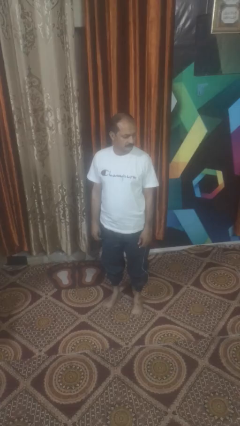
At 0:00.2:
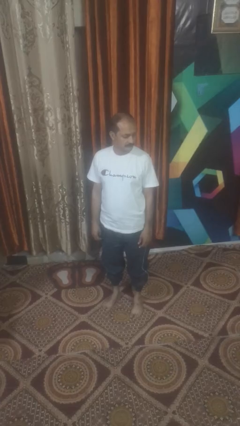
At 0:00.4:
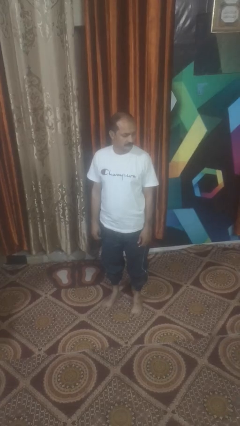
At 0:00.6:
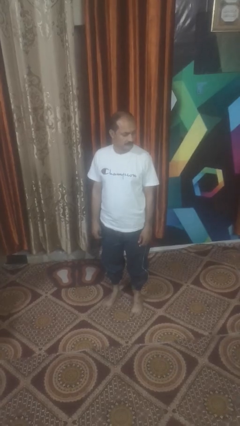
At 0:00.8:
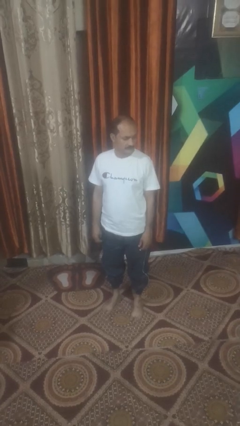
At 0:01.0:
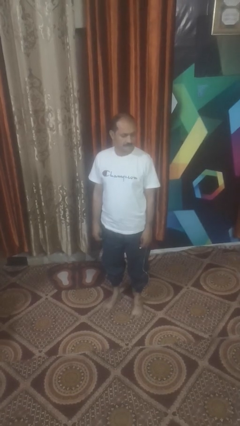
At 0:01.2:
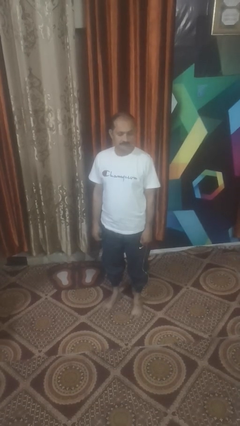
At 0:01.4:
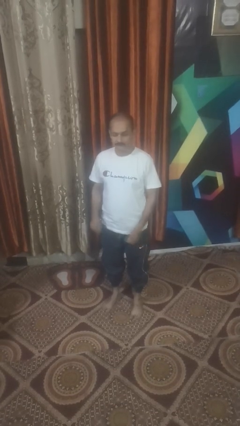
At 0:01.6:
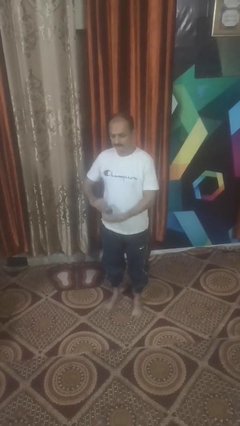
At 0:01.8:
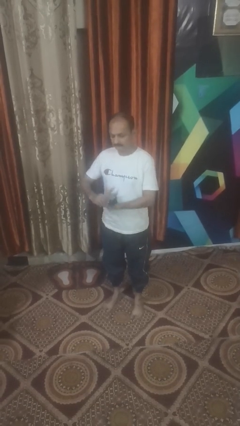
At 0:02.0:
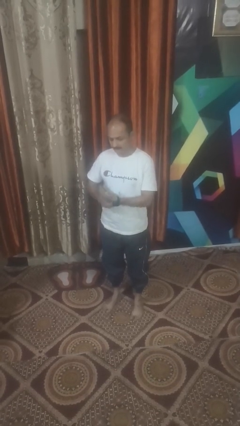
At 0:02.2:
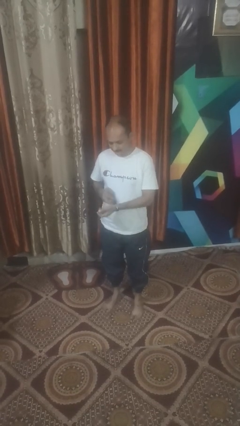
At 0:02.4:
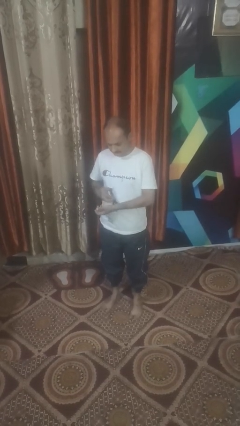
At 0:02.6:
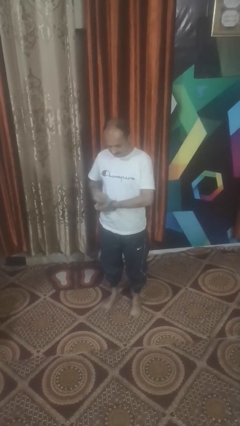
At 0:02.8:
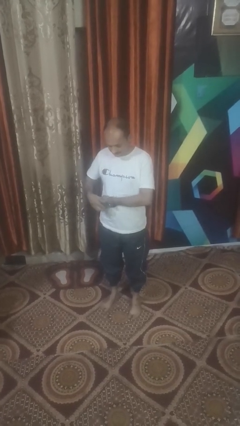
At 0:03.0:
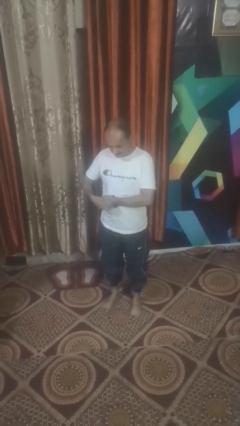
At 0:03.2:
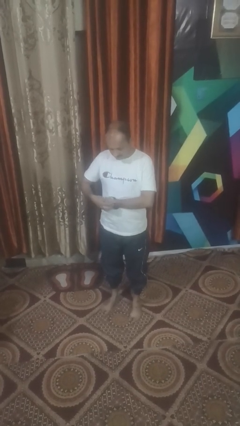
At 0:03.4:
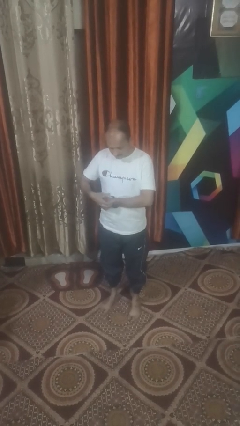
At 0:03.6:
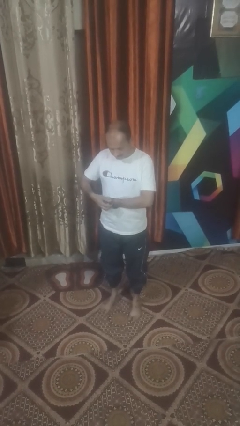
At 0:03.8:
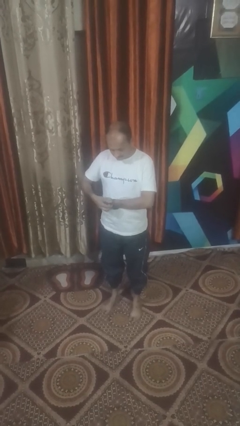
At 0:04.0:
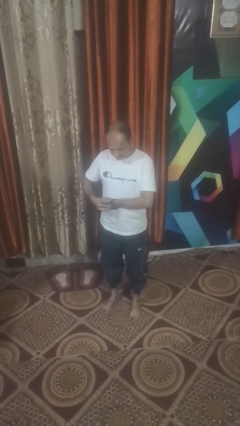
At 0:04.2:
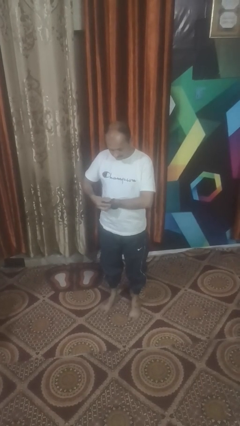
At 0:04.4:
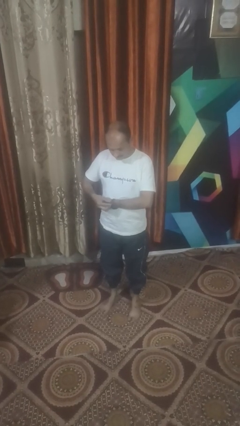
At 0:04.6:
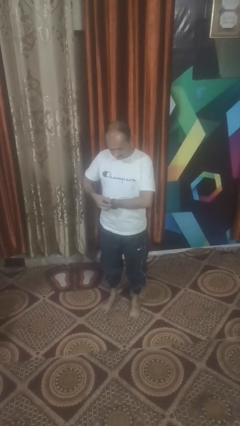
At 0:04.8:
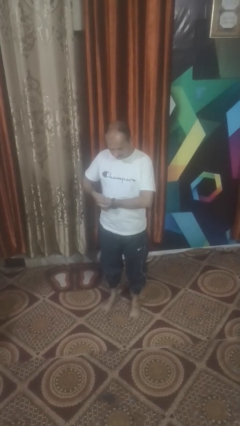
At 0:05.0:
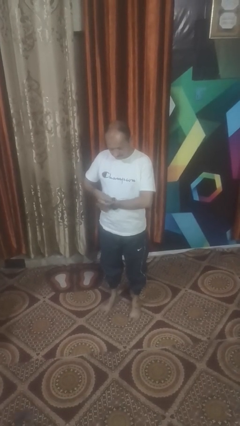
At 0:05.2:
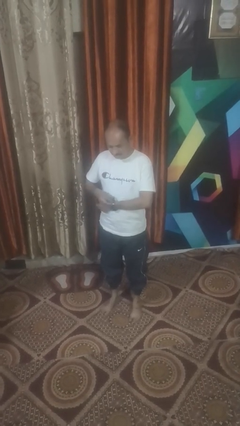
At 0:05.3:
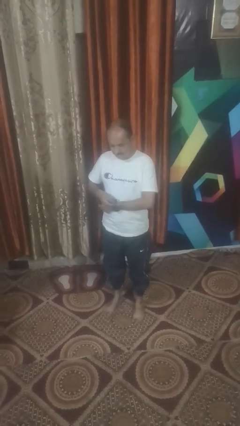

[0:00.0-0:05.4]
person puts on wristwatch

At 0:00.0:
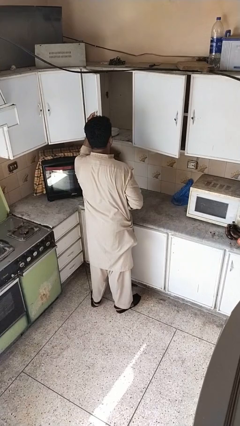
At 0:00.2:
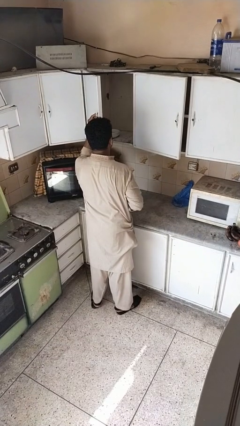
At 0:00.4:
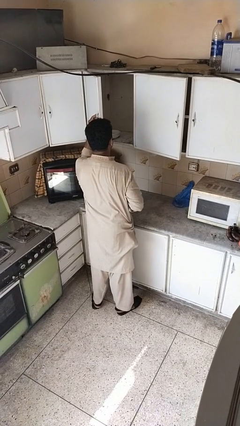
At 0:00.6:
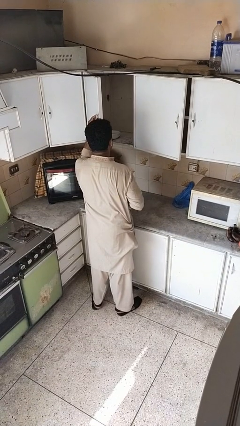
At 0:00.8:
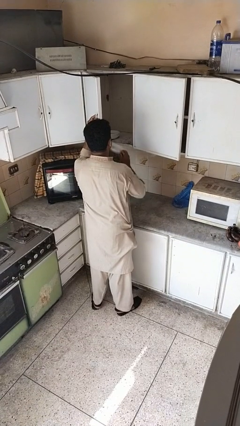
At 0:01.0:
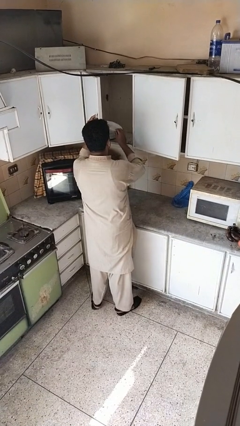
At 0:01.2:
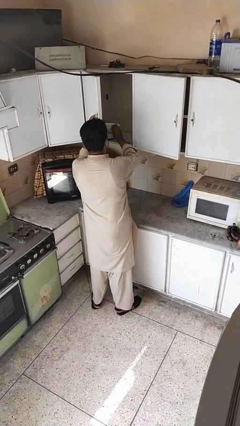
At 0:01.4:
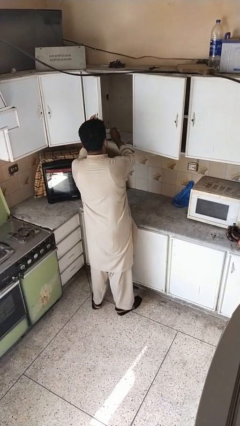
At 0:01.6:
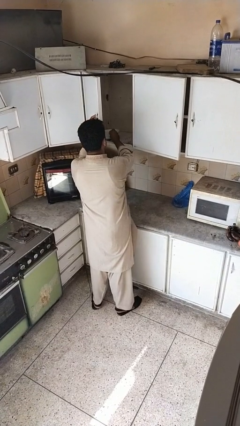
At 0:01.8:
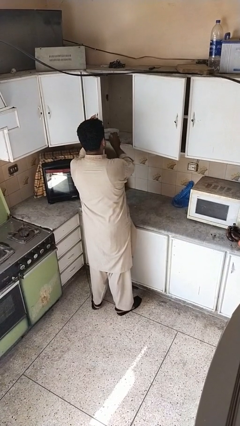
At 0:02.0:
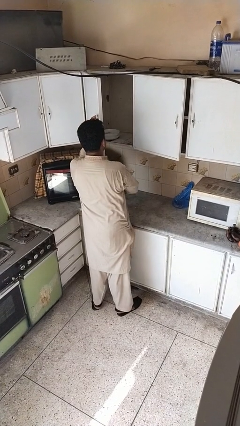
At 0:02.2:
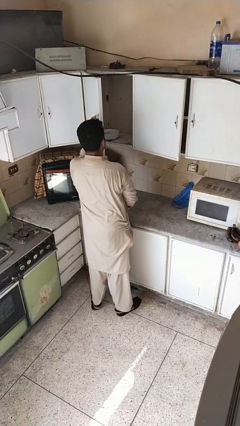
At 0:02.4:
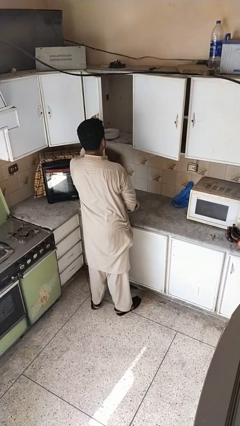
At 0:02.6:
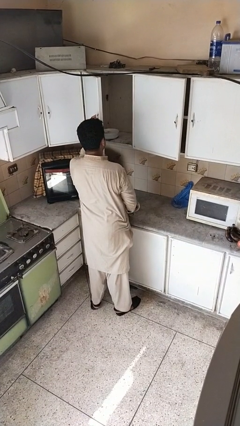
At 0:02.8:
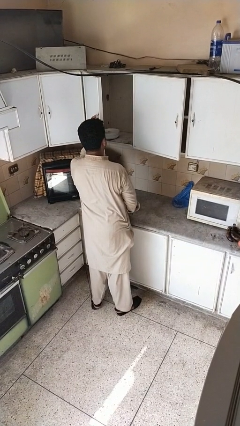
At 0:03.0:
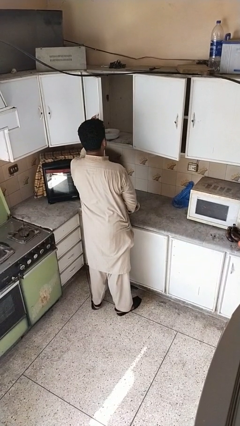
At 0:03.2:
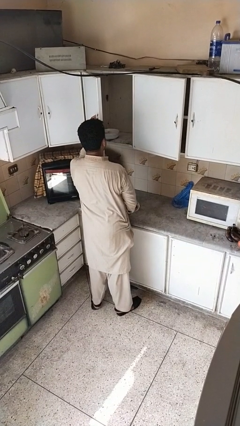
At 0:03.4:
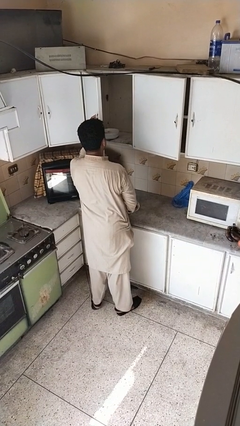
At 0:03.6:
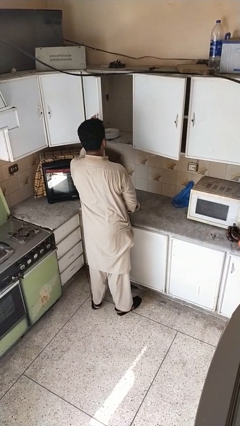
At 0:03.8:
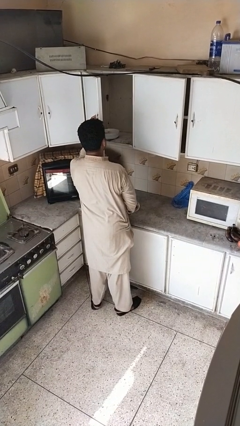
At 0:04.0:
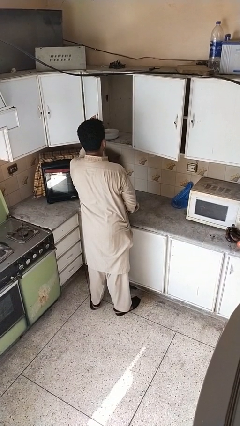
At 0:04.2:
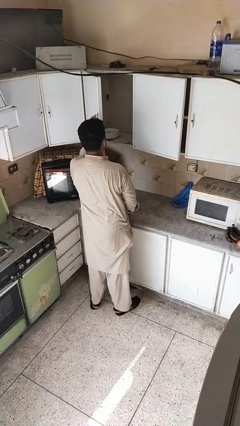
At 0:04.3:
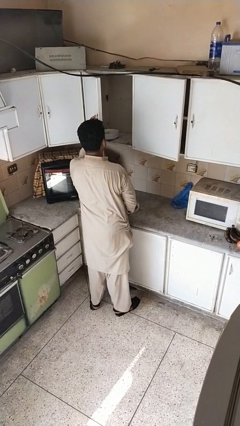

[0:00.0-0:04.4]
person puts object in cabinet

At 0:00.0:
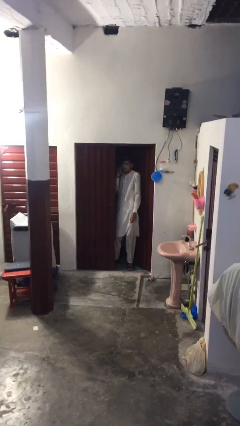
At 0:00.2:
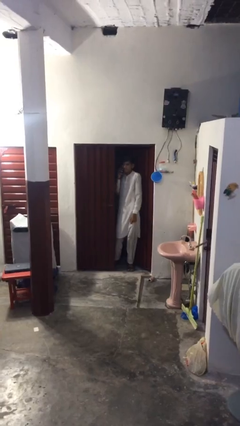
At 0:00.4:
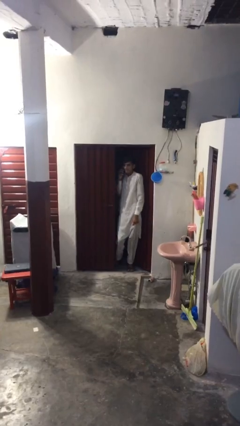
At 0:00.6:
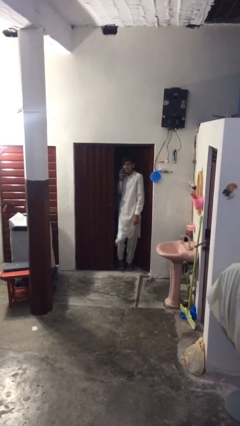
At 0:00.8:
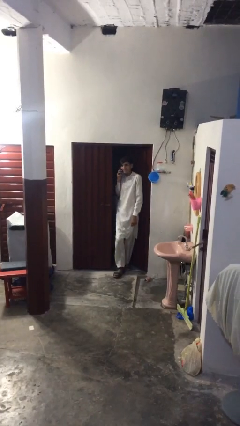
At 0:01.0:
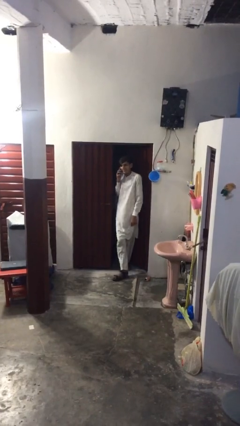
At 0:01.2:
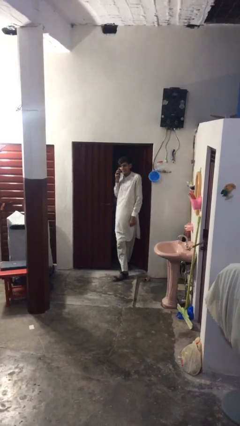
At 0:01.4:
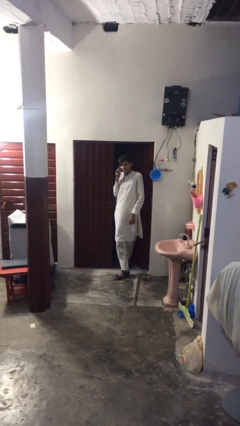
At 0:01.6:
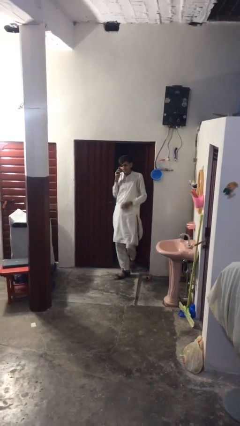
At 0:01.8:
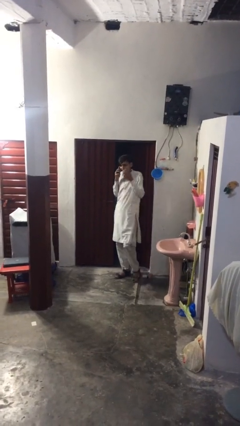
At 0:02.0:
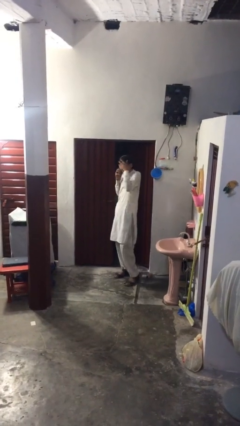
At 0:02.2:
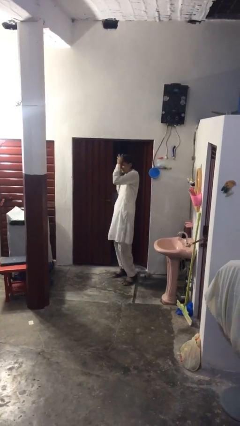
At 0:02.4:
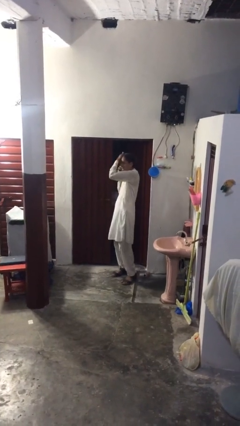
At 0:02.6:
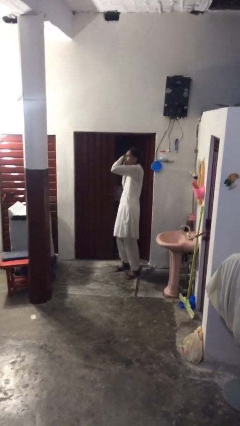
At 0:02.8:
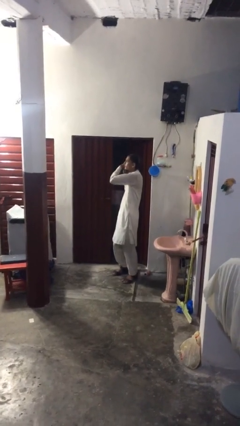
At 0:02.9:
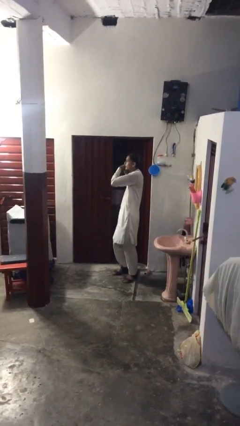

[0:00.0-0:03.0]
person enters scene through structure

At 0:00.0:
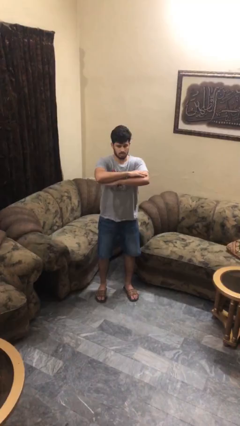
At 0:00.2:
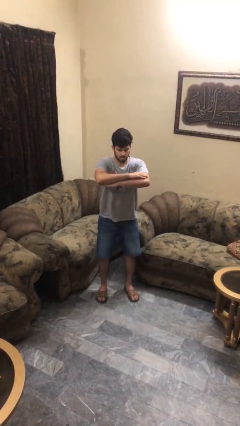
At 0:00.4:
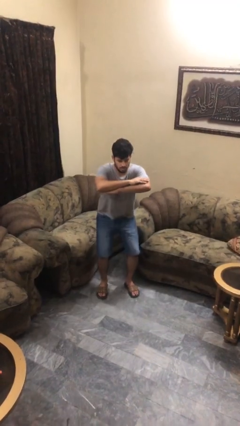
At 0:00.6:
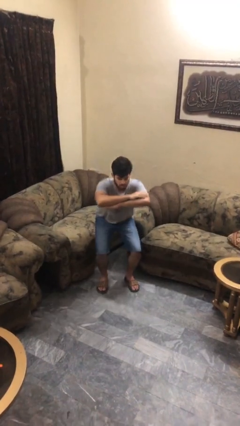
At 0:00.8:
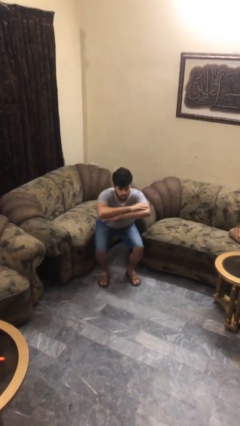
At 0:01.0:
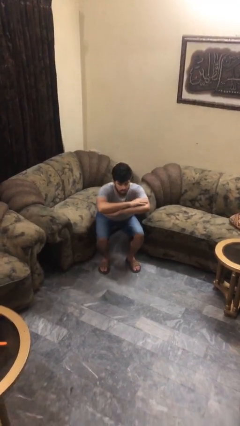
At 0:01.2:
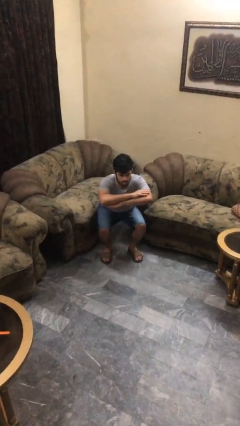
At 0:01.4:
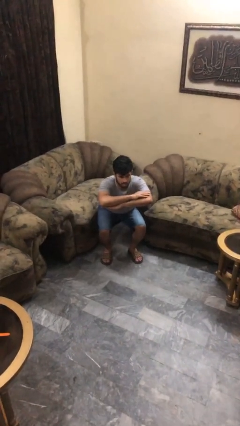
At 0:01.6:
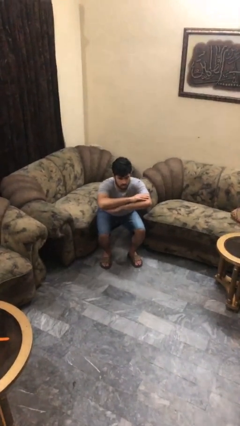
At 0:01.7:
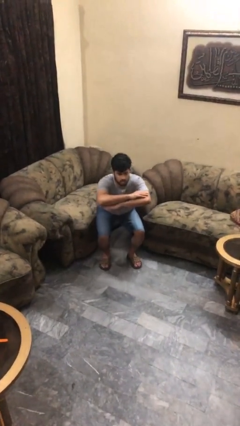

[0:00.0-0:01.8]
person squats

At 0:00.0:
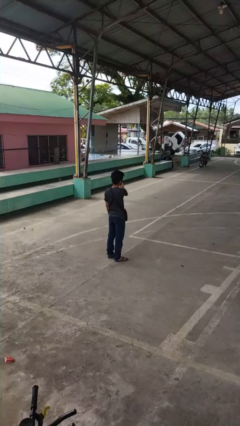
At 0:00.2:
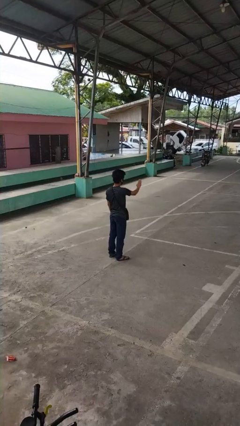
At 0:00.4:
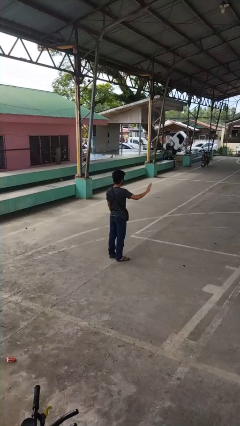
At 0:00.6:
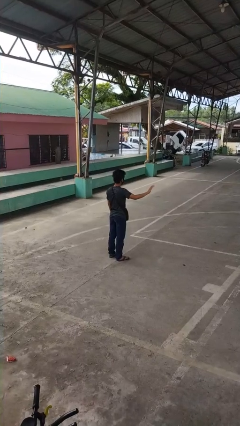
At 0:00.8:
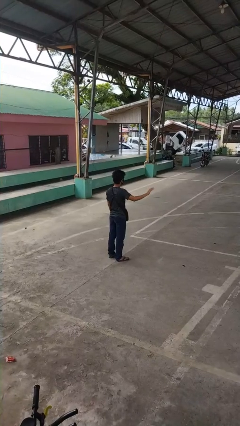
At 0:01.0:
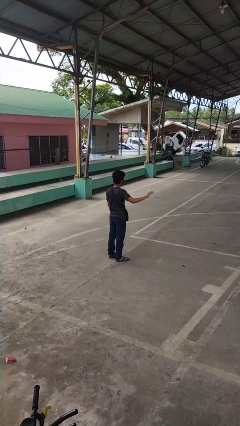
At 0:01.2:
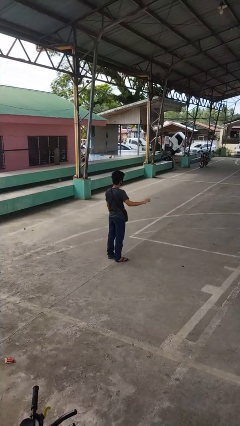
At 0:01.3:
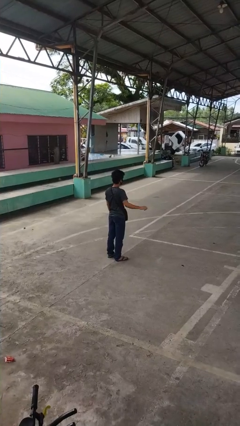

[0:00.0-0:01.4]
person gestures swipe right

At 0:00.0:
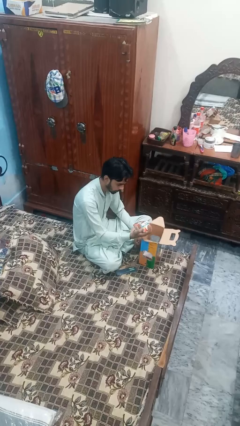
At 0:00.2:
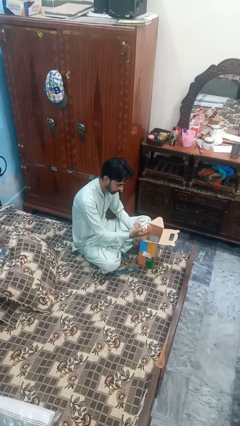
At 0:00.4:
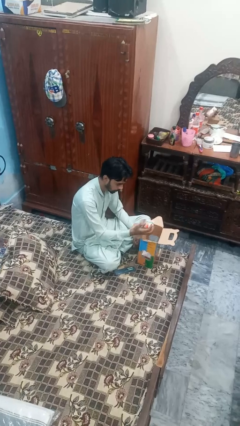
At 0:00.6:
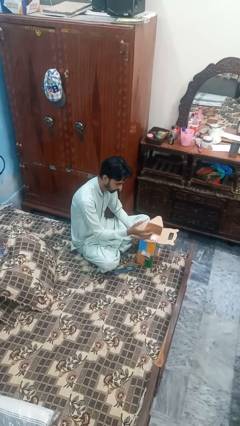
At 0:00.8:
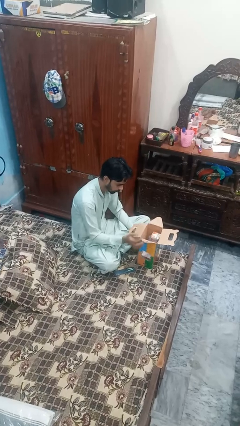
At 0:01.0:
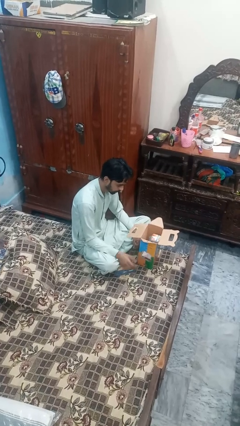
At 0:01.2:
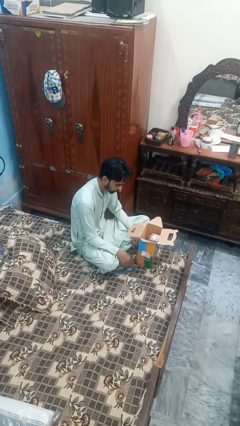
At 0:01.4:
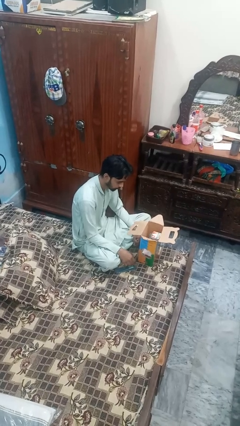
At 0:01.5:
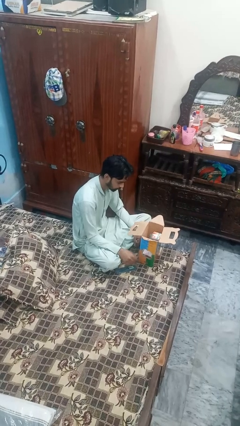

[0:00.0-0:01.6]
person puts object into box
